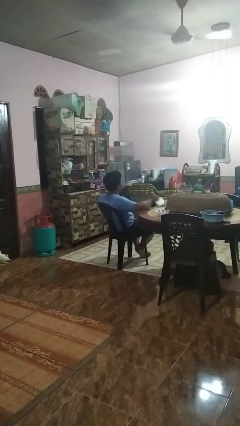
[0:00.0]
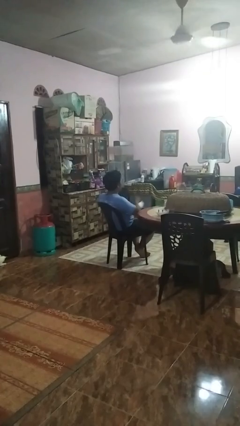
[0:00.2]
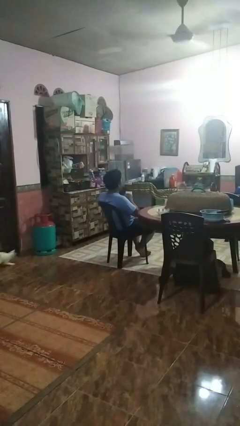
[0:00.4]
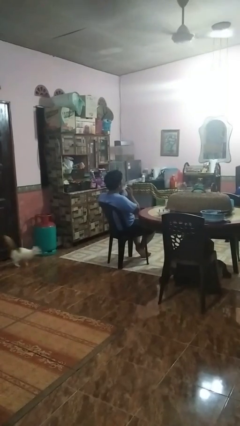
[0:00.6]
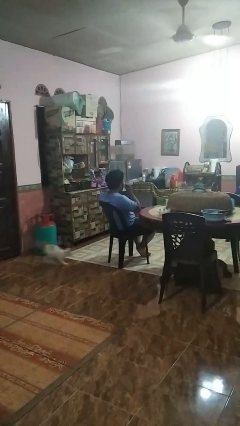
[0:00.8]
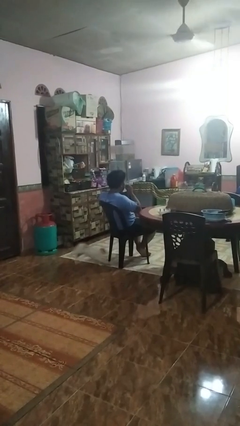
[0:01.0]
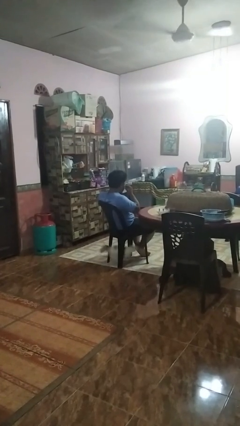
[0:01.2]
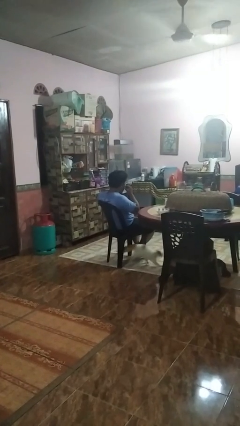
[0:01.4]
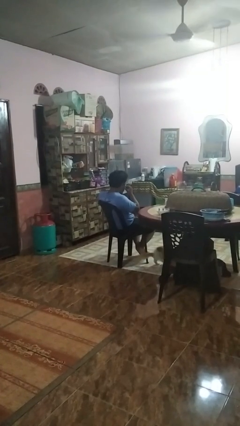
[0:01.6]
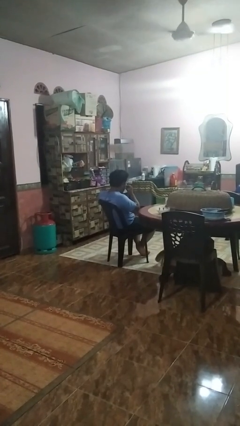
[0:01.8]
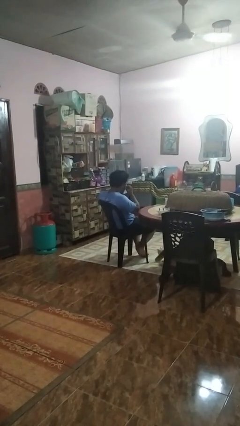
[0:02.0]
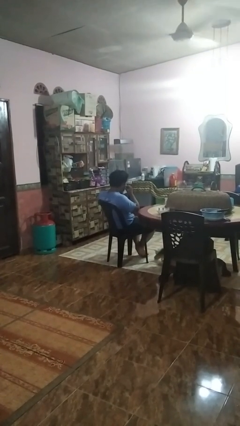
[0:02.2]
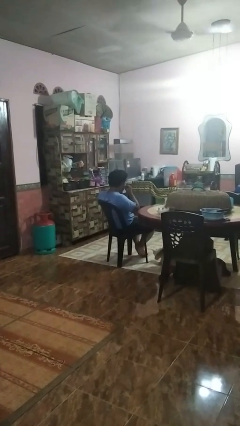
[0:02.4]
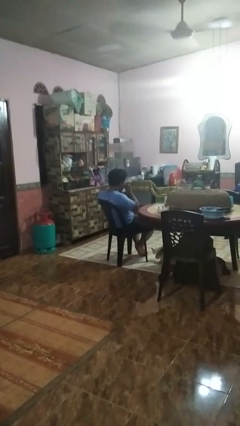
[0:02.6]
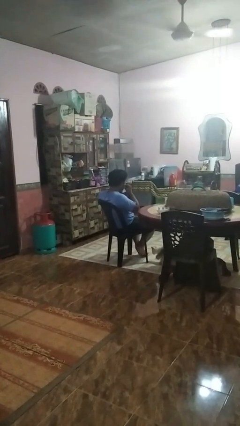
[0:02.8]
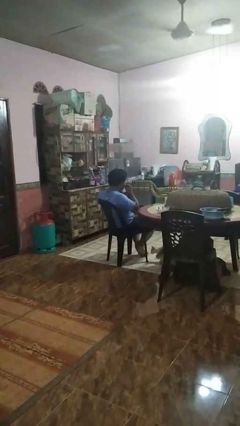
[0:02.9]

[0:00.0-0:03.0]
person blows nose

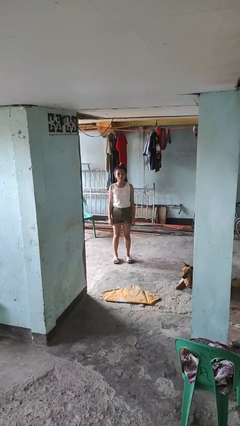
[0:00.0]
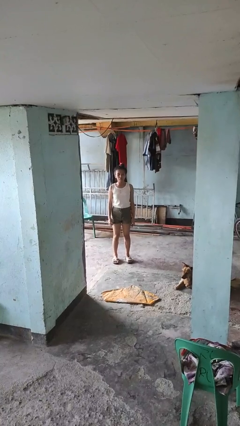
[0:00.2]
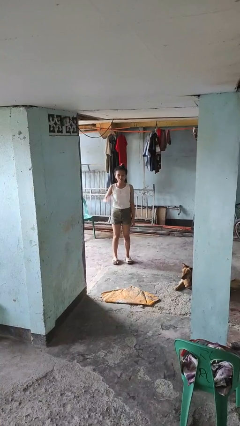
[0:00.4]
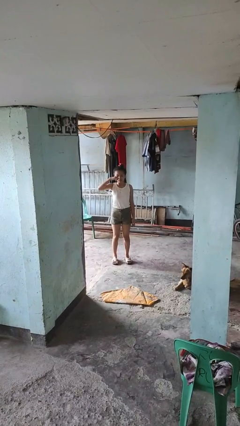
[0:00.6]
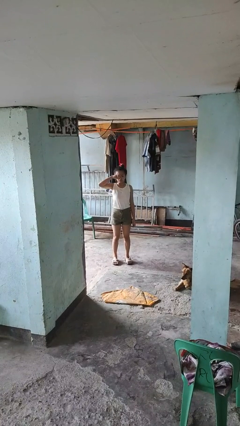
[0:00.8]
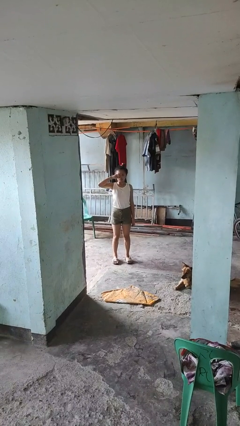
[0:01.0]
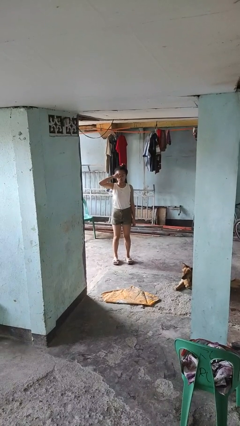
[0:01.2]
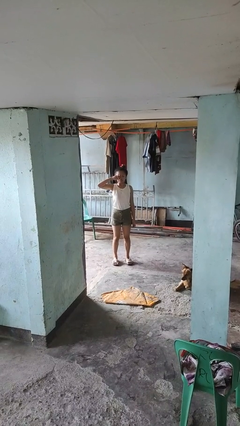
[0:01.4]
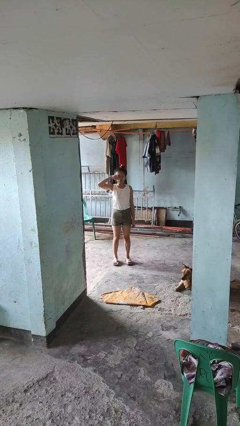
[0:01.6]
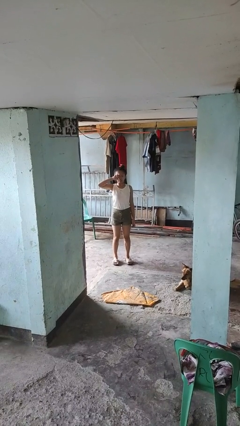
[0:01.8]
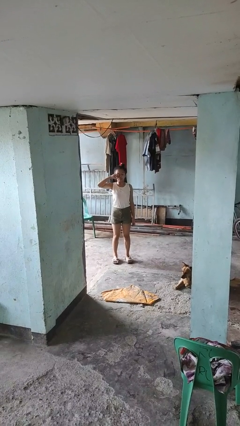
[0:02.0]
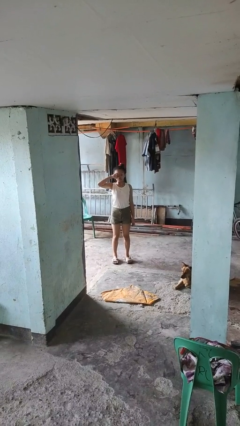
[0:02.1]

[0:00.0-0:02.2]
person rubs eyes

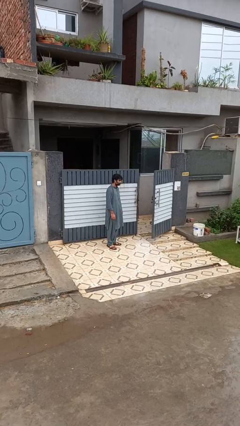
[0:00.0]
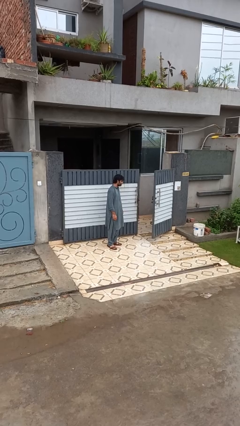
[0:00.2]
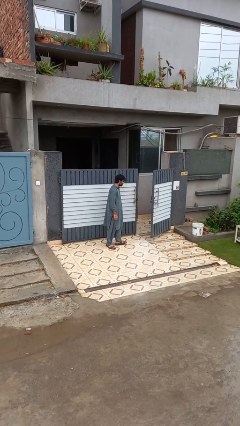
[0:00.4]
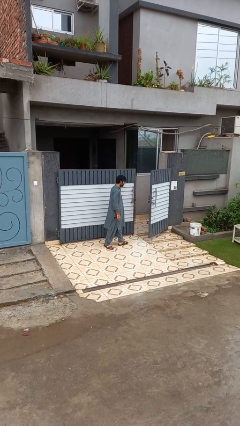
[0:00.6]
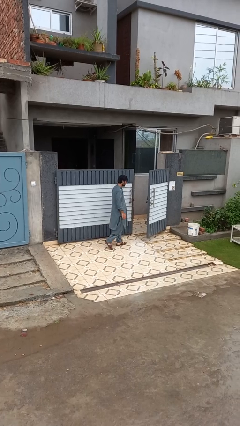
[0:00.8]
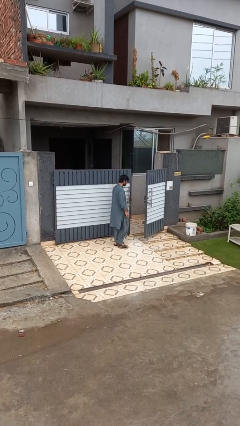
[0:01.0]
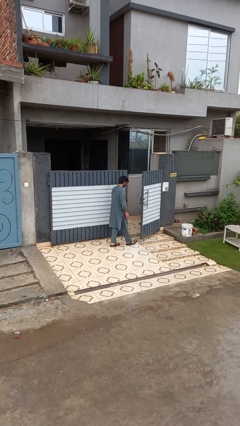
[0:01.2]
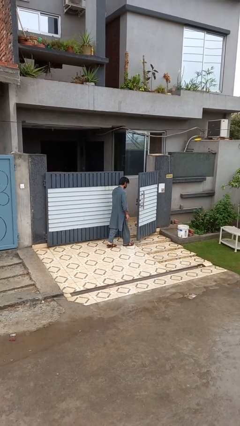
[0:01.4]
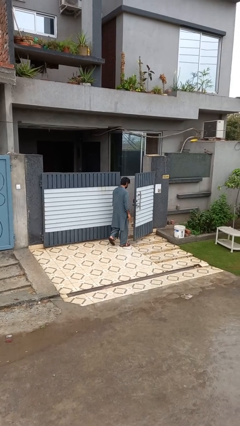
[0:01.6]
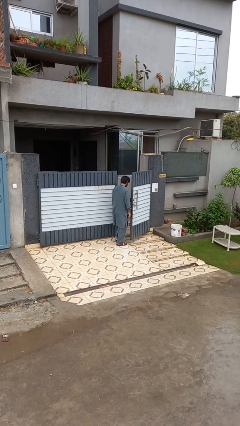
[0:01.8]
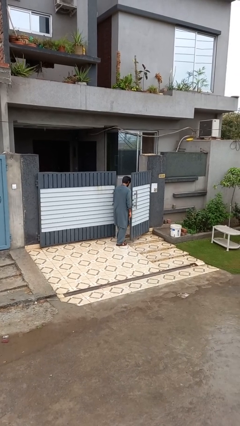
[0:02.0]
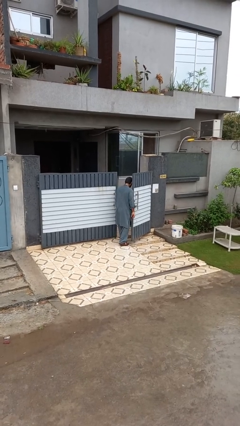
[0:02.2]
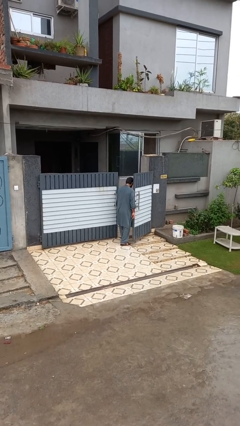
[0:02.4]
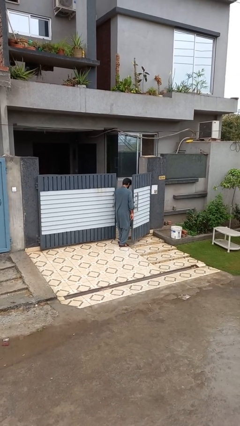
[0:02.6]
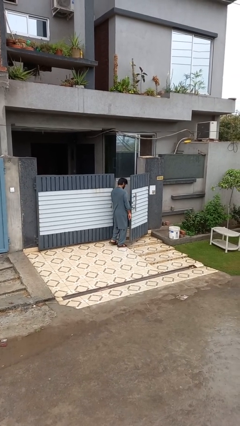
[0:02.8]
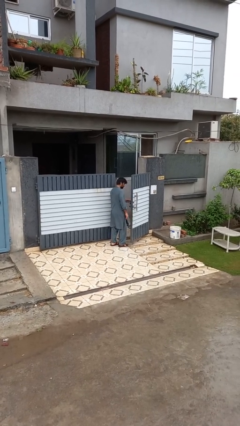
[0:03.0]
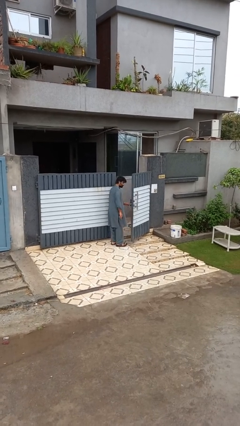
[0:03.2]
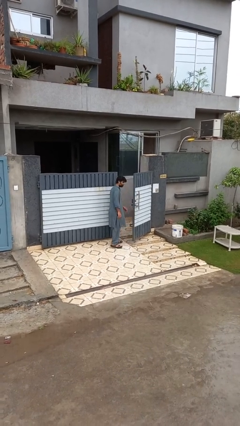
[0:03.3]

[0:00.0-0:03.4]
person bumps into wall

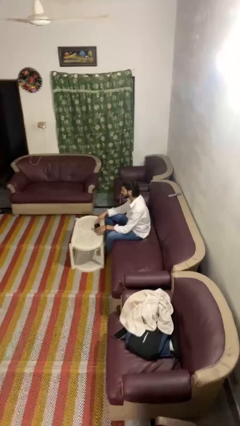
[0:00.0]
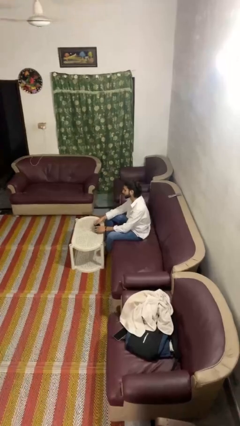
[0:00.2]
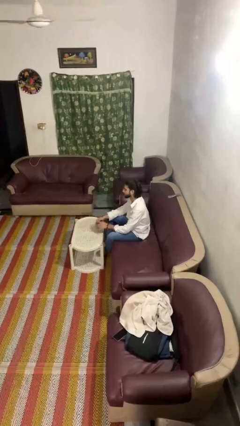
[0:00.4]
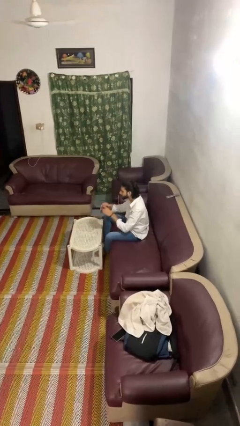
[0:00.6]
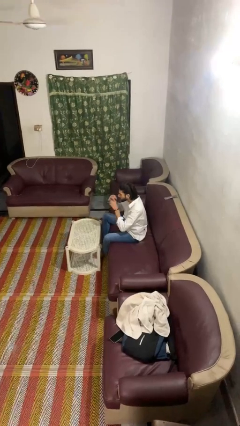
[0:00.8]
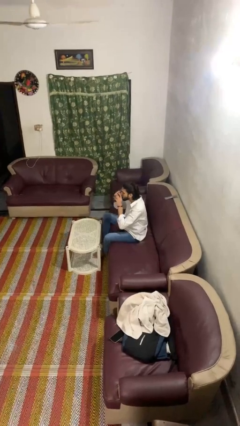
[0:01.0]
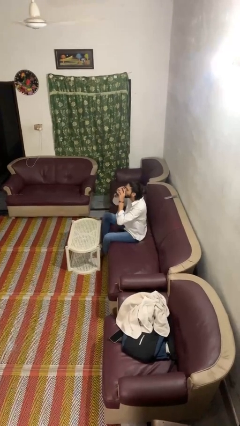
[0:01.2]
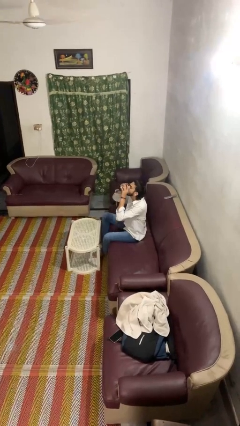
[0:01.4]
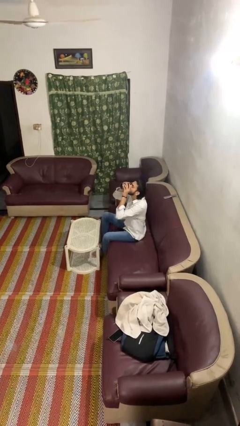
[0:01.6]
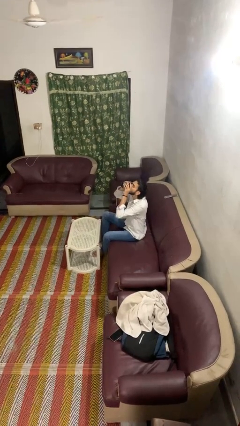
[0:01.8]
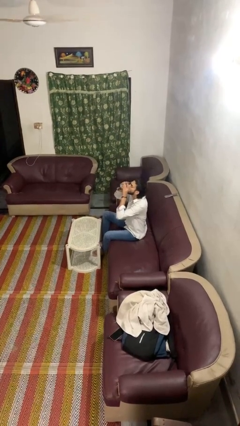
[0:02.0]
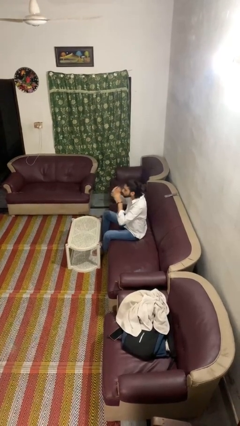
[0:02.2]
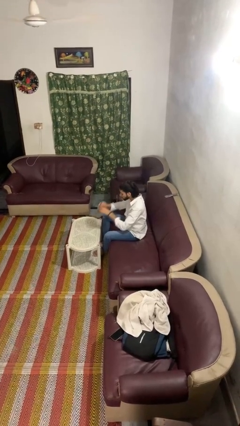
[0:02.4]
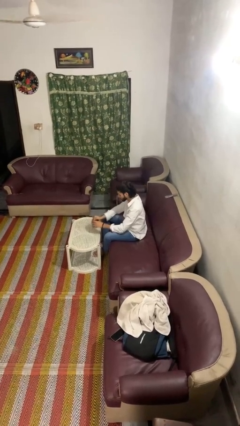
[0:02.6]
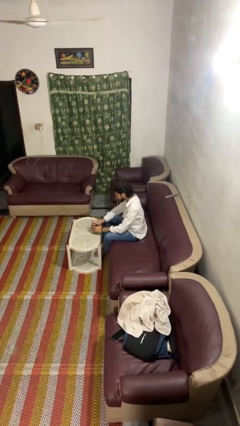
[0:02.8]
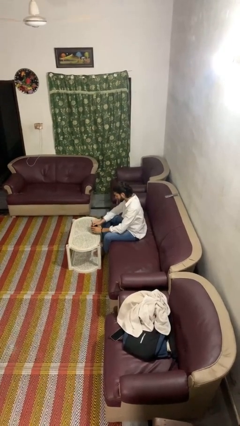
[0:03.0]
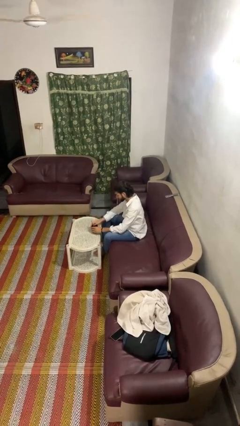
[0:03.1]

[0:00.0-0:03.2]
person drinks from mug

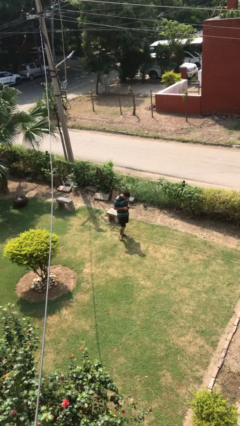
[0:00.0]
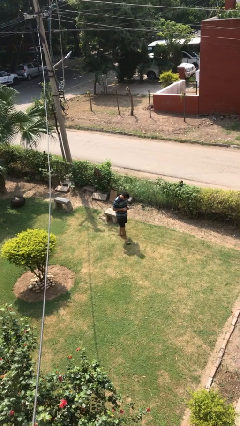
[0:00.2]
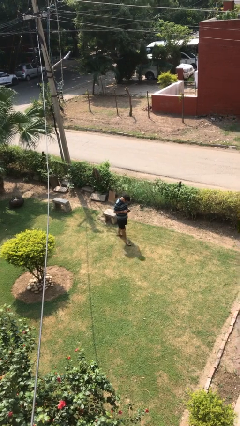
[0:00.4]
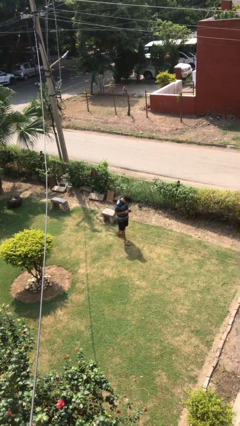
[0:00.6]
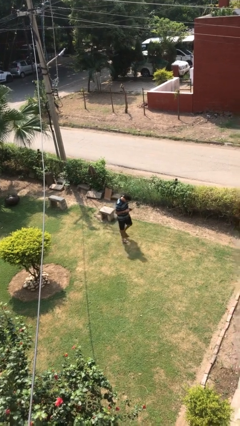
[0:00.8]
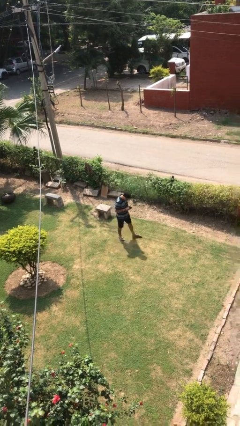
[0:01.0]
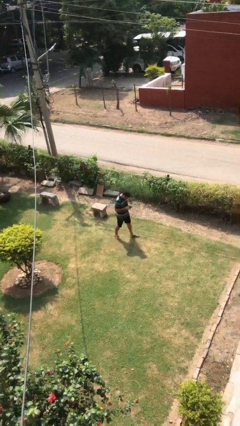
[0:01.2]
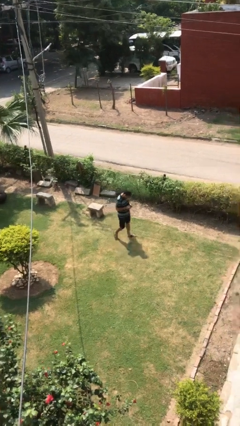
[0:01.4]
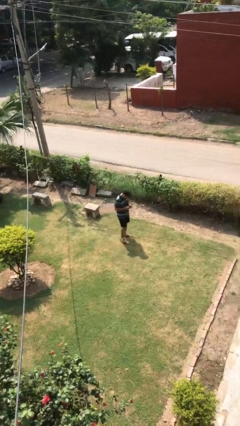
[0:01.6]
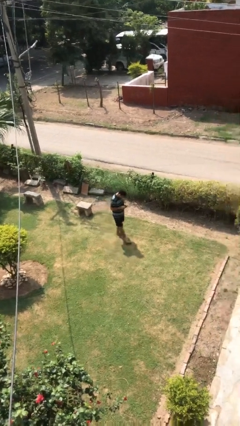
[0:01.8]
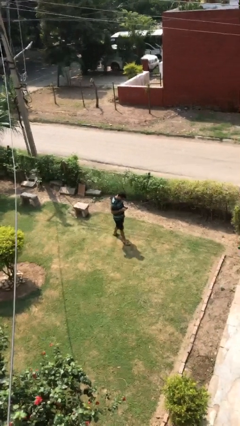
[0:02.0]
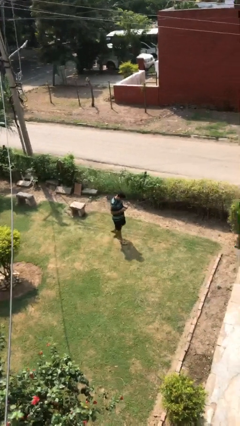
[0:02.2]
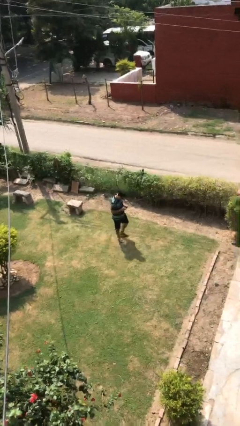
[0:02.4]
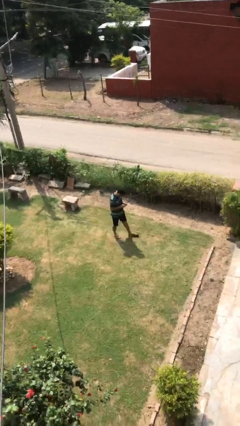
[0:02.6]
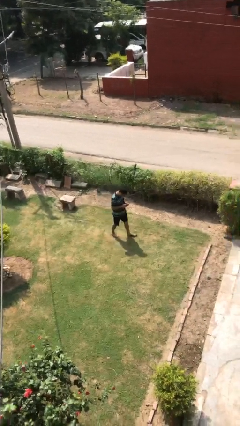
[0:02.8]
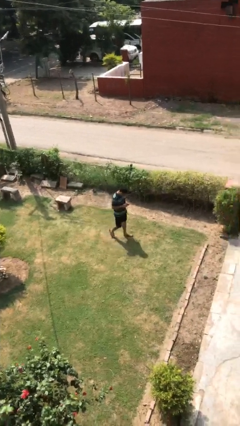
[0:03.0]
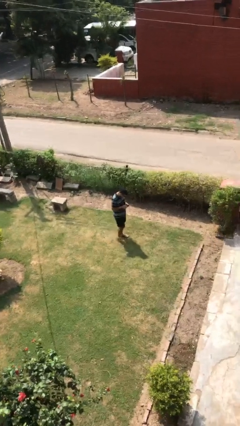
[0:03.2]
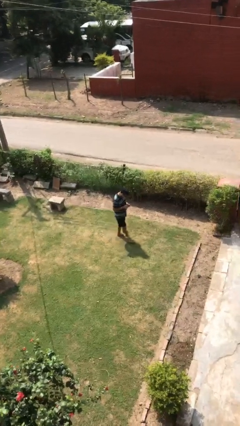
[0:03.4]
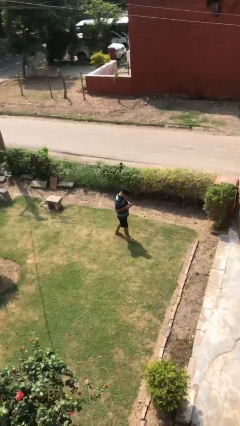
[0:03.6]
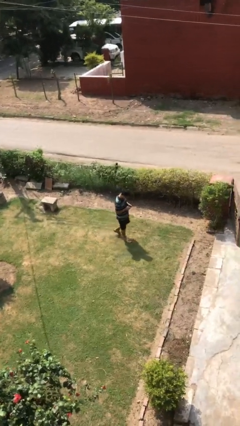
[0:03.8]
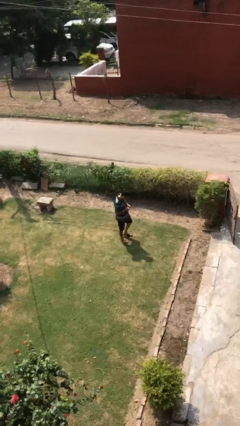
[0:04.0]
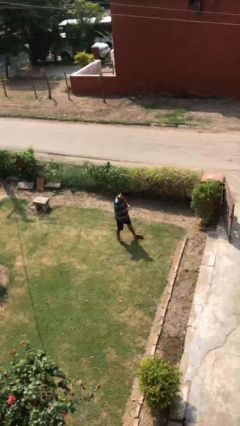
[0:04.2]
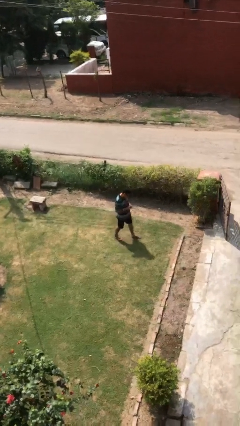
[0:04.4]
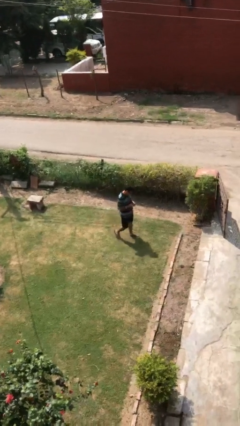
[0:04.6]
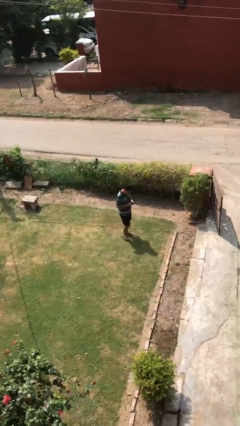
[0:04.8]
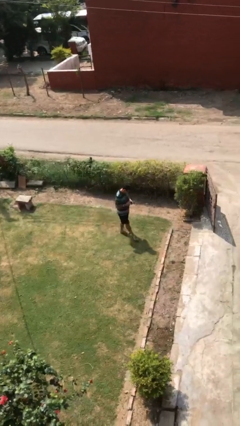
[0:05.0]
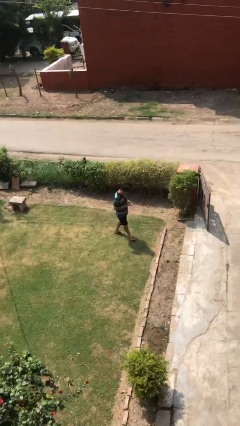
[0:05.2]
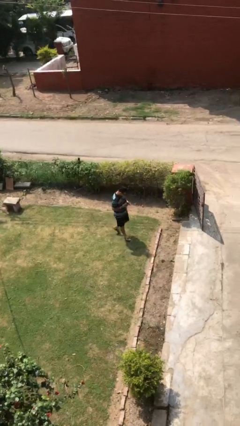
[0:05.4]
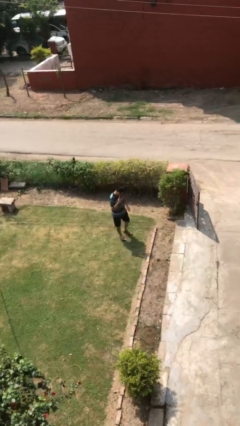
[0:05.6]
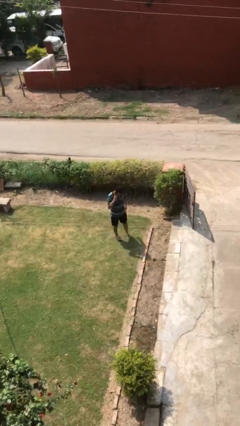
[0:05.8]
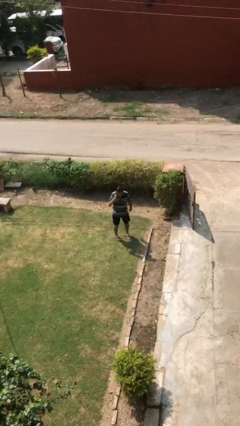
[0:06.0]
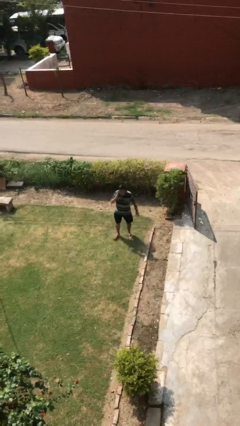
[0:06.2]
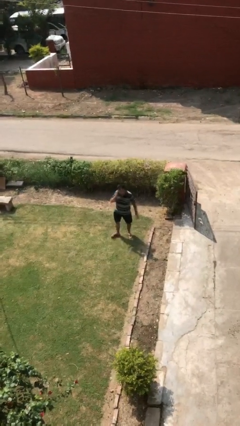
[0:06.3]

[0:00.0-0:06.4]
person texts on phone
